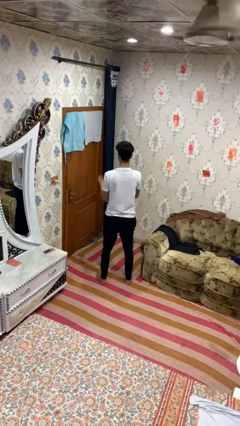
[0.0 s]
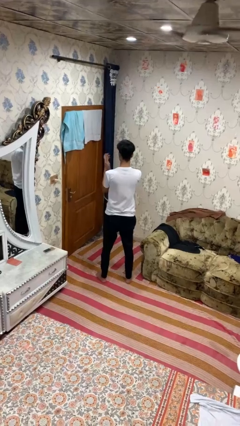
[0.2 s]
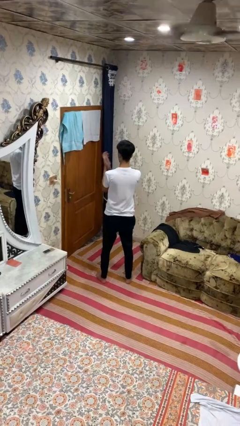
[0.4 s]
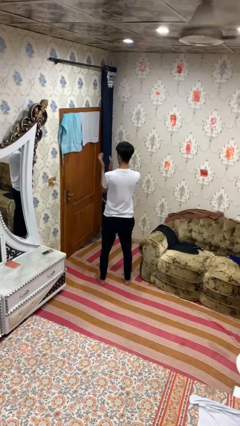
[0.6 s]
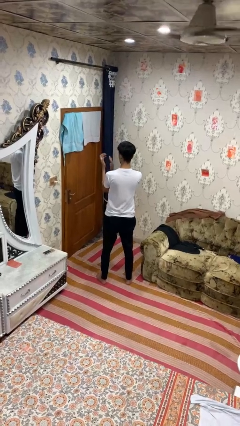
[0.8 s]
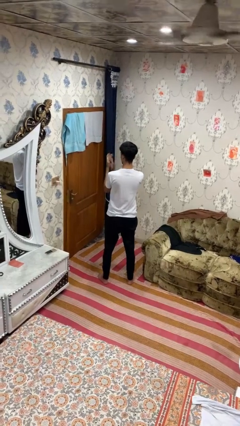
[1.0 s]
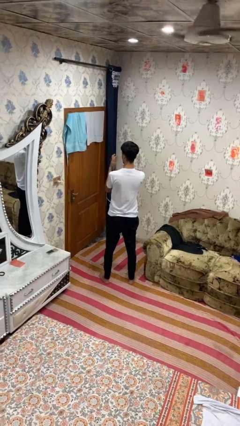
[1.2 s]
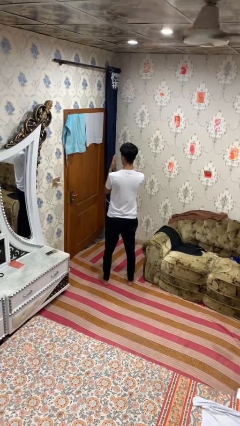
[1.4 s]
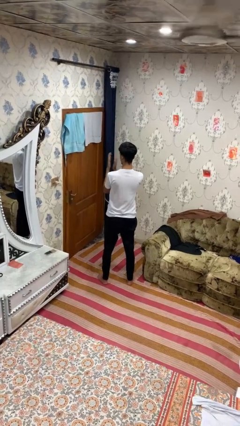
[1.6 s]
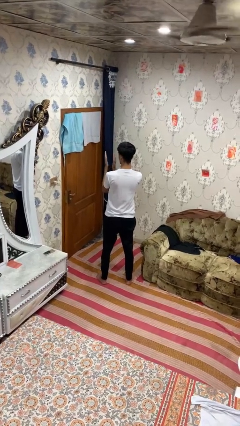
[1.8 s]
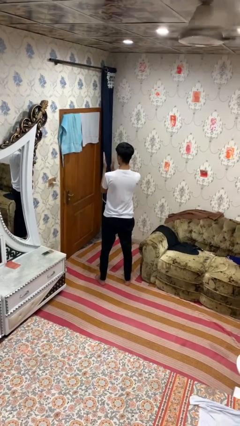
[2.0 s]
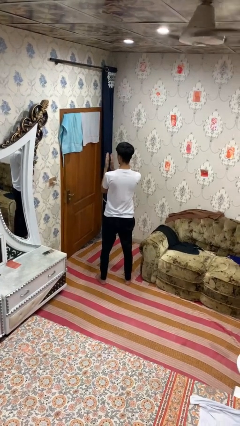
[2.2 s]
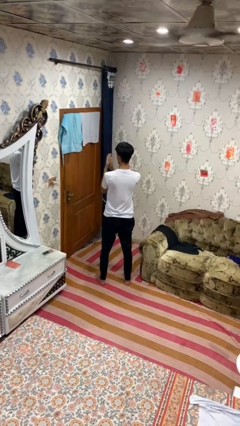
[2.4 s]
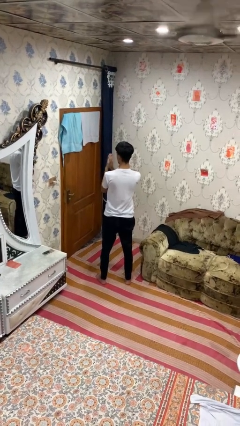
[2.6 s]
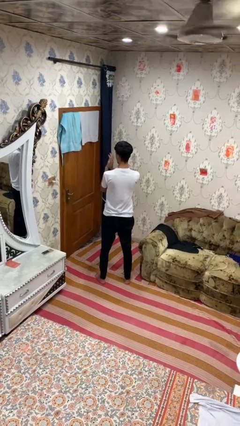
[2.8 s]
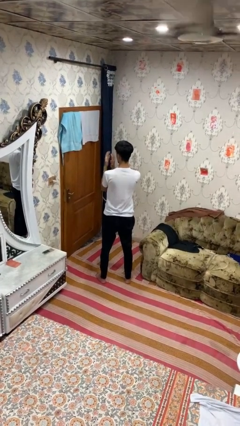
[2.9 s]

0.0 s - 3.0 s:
person claps hands

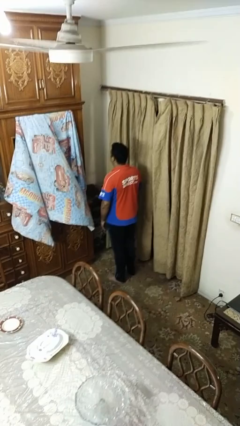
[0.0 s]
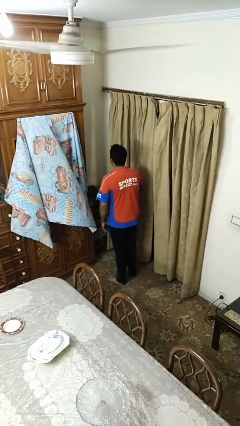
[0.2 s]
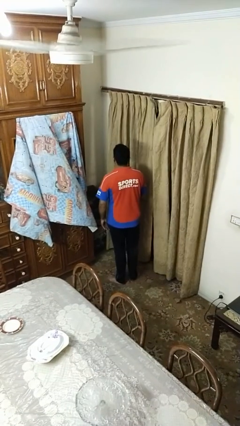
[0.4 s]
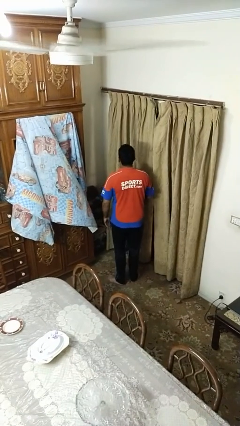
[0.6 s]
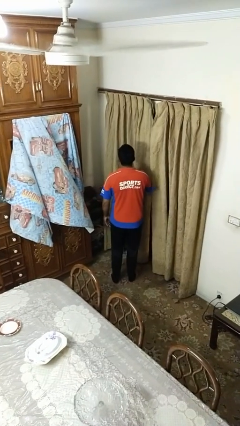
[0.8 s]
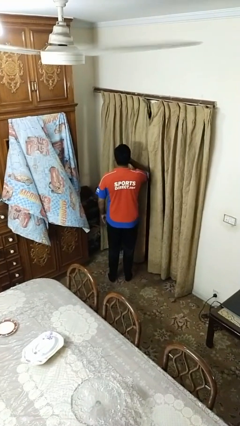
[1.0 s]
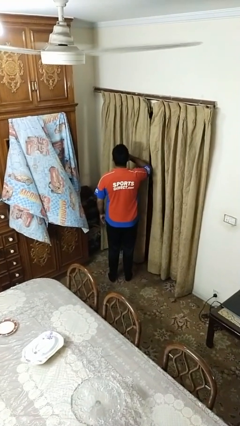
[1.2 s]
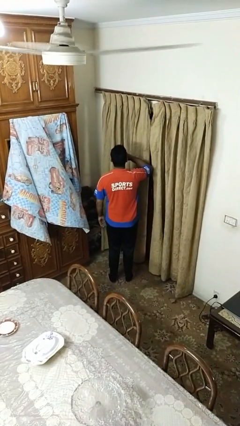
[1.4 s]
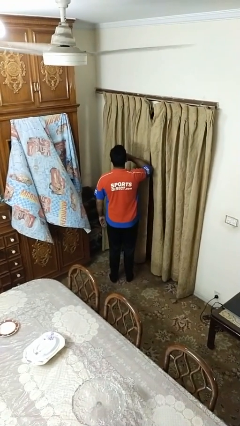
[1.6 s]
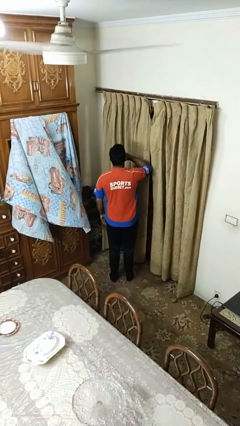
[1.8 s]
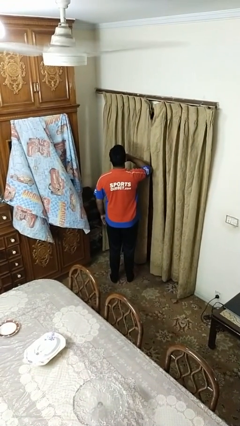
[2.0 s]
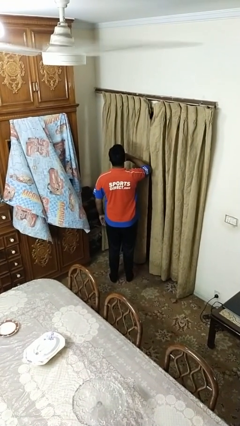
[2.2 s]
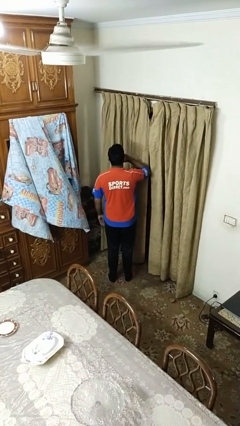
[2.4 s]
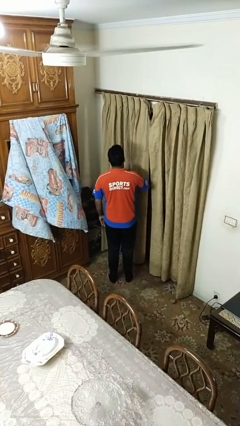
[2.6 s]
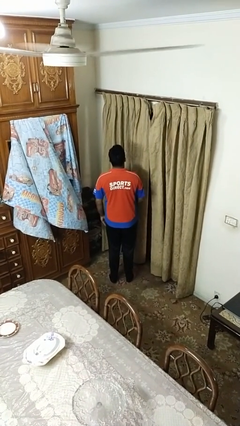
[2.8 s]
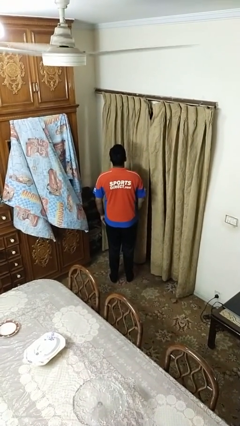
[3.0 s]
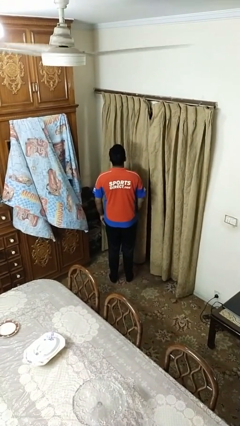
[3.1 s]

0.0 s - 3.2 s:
person yawns

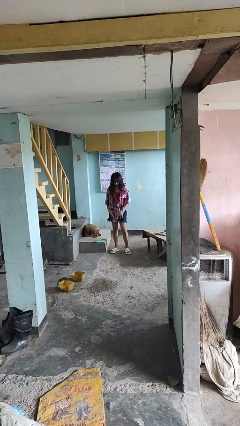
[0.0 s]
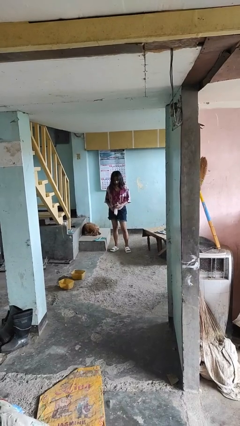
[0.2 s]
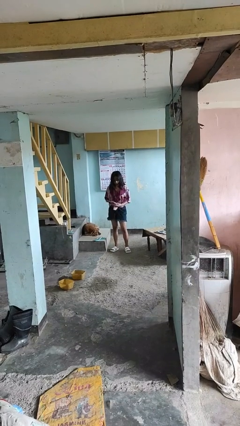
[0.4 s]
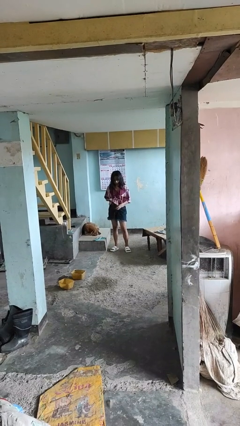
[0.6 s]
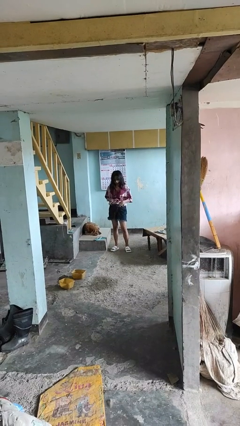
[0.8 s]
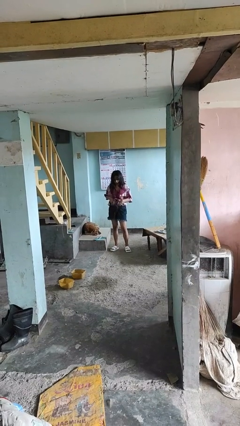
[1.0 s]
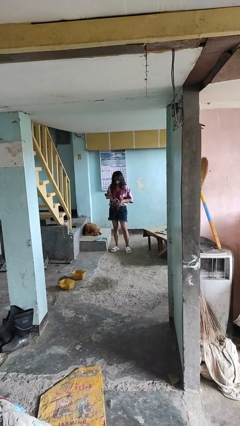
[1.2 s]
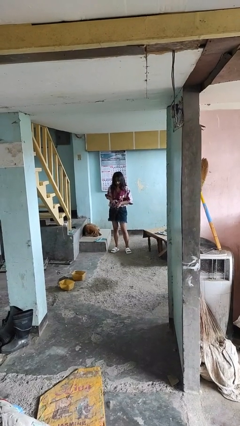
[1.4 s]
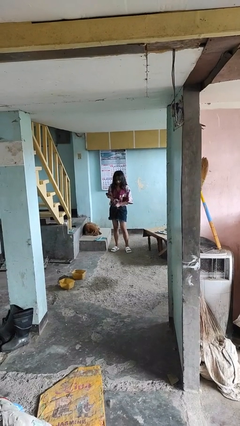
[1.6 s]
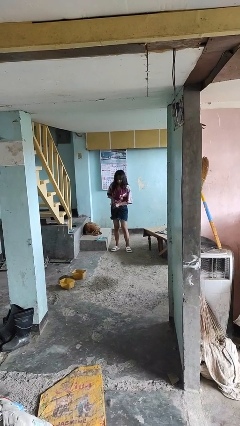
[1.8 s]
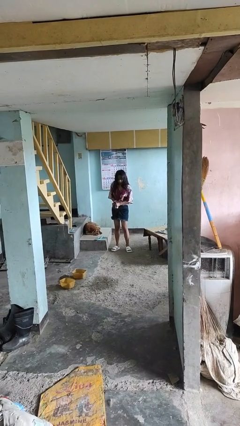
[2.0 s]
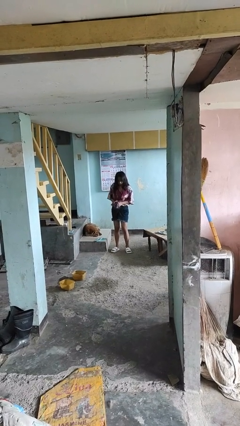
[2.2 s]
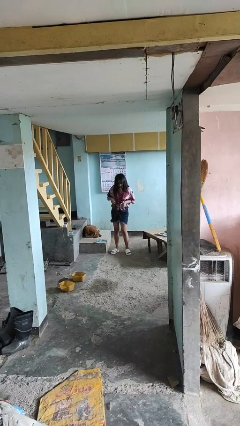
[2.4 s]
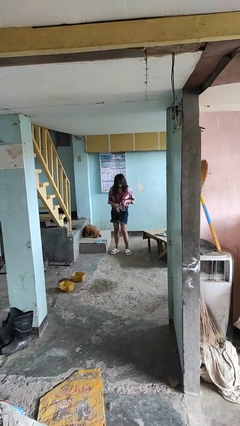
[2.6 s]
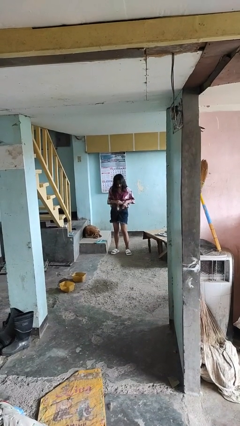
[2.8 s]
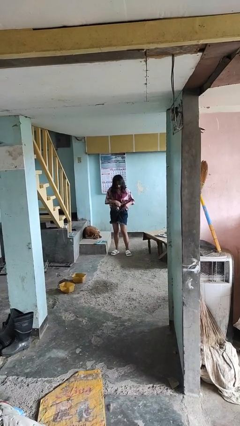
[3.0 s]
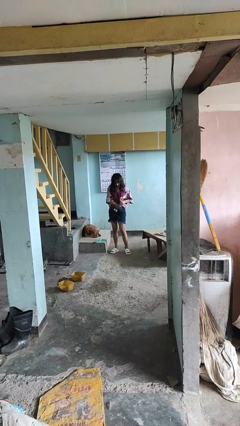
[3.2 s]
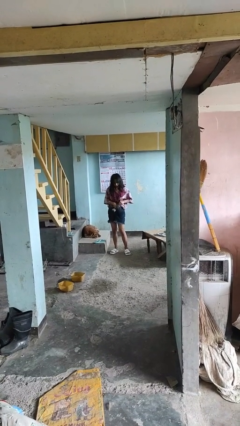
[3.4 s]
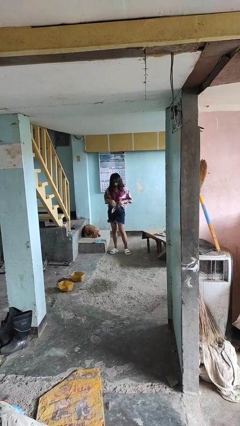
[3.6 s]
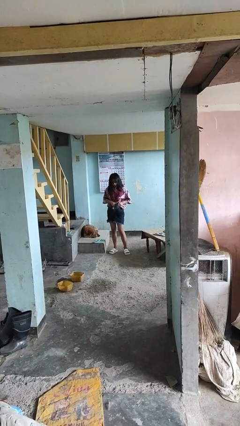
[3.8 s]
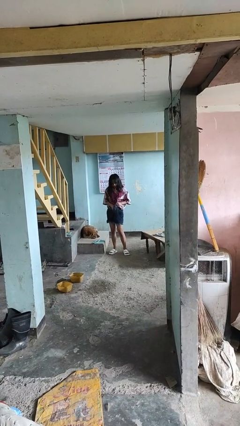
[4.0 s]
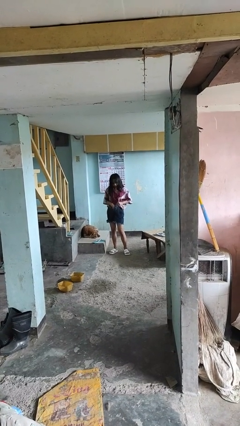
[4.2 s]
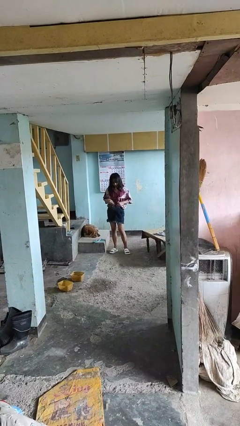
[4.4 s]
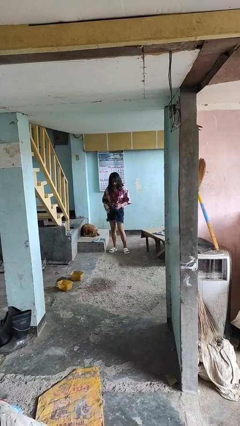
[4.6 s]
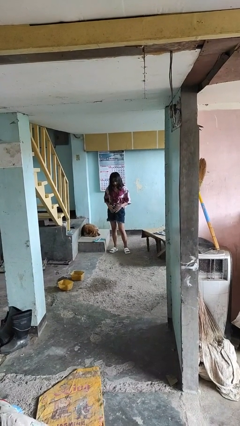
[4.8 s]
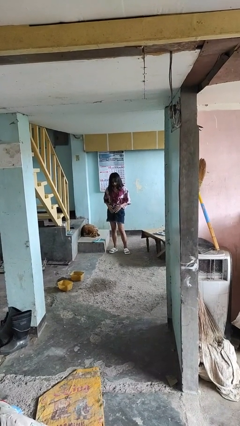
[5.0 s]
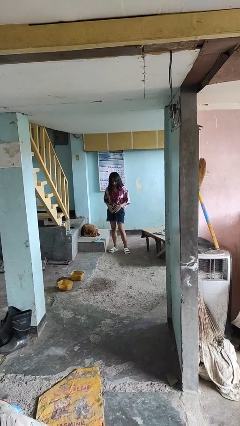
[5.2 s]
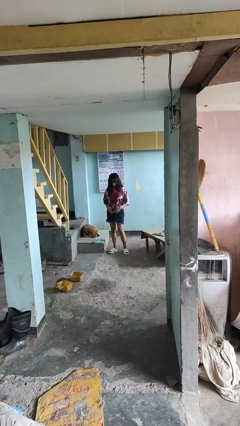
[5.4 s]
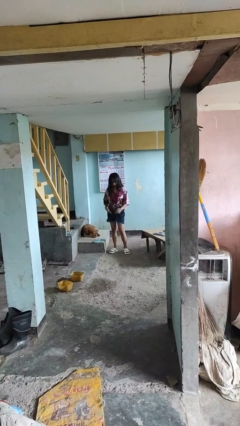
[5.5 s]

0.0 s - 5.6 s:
person tucks in shirt

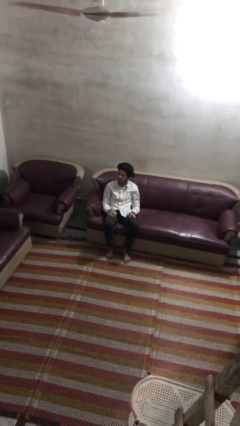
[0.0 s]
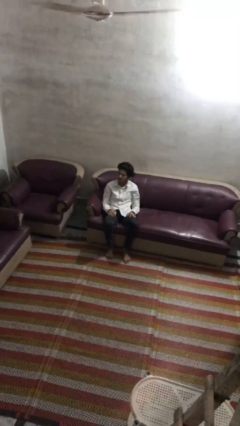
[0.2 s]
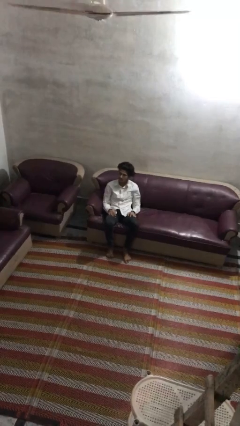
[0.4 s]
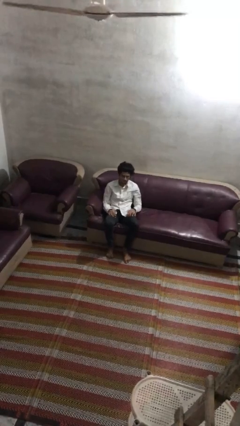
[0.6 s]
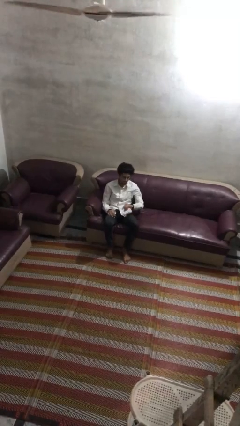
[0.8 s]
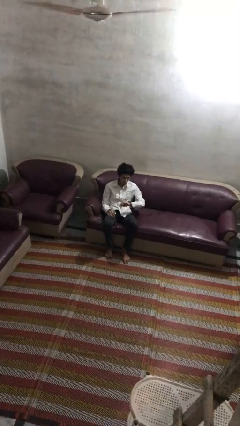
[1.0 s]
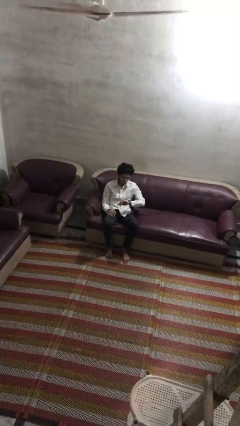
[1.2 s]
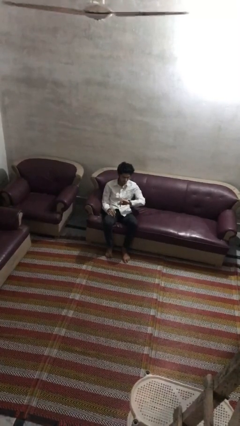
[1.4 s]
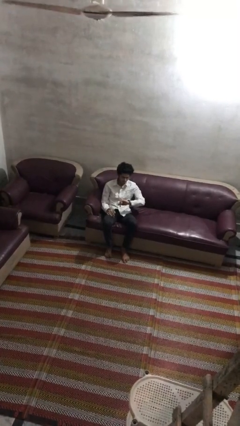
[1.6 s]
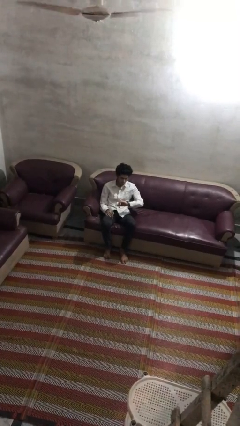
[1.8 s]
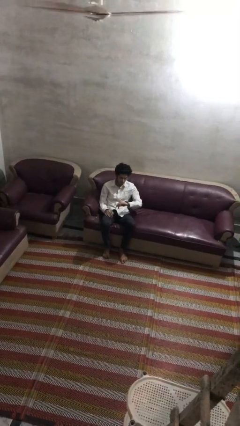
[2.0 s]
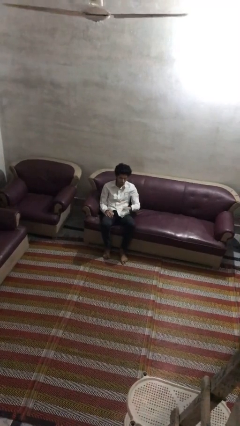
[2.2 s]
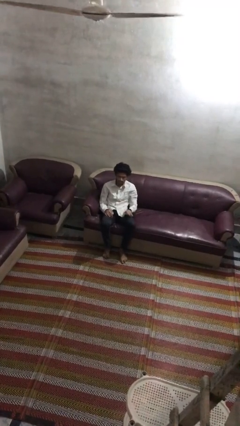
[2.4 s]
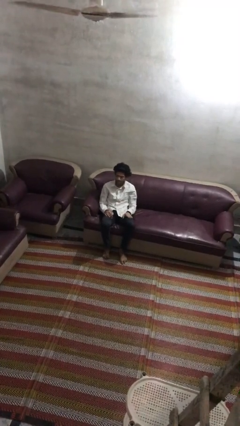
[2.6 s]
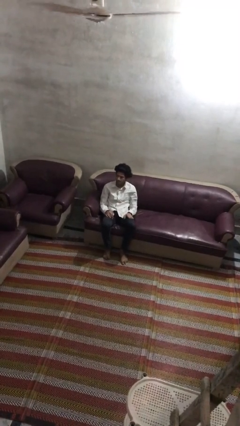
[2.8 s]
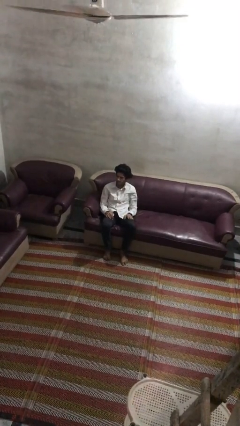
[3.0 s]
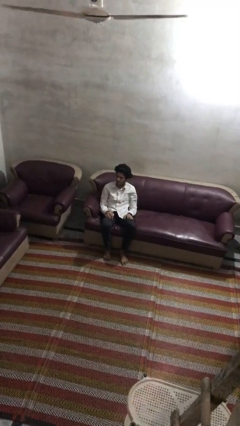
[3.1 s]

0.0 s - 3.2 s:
person looks at wristwatch

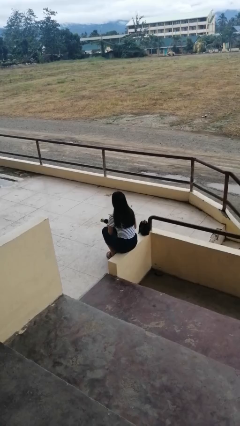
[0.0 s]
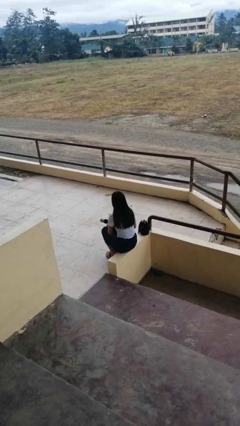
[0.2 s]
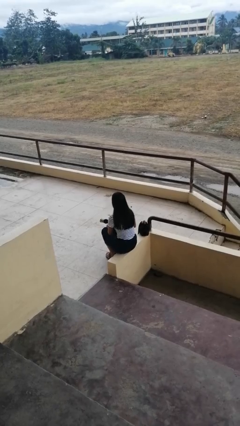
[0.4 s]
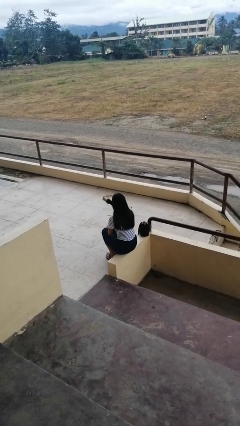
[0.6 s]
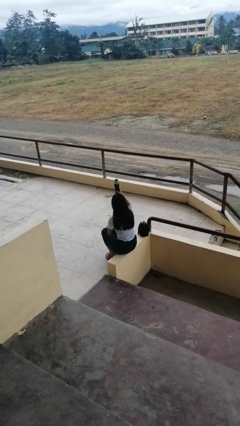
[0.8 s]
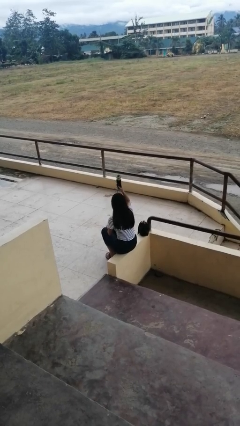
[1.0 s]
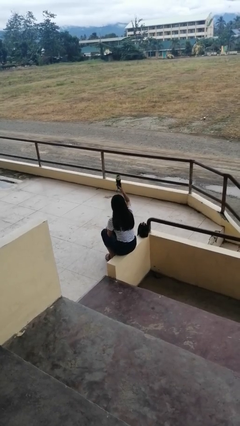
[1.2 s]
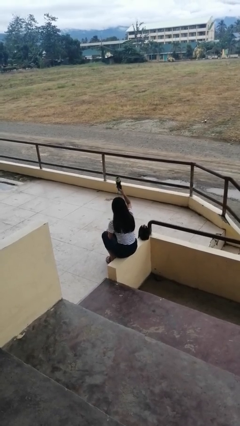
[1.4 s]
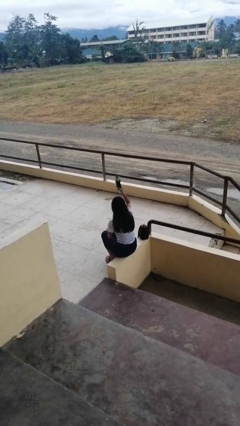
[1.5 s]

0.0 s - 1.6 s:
person holds object above head

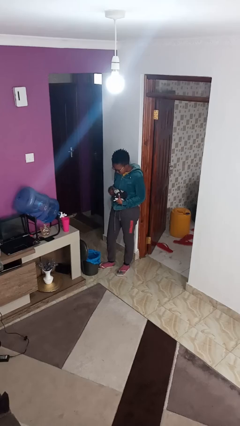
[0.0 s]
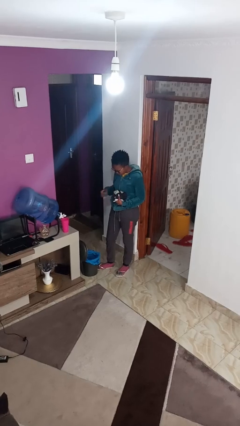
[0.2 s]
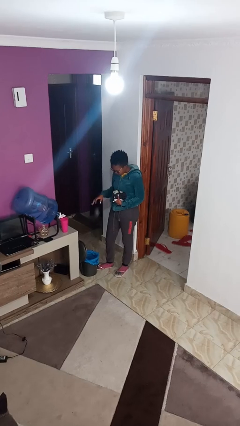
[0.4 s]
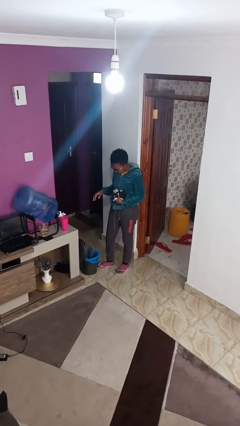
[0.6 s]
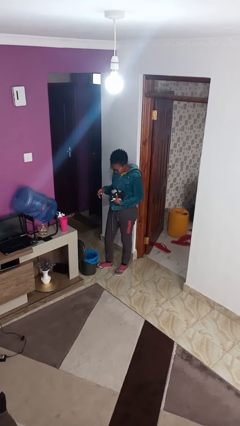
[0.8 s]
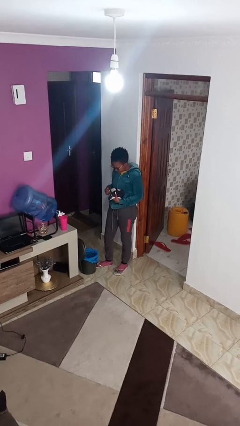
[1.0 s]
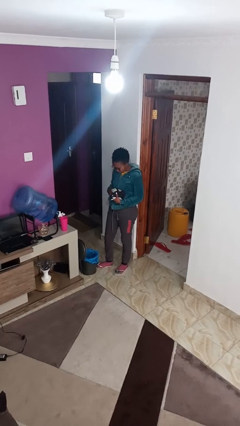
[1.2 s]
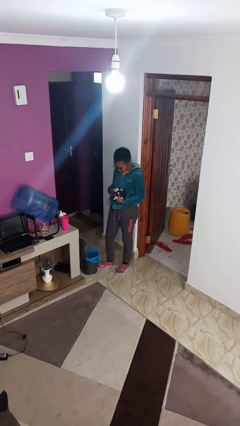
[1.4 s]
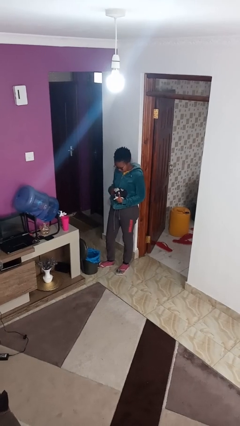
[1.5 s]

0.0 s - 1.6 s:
person discards trash
